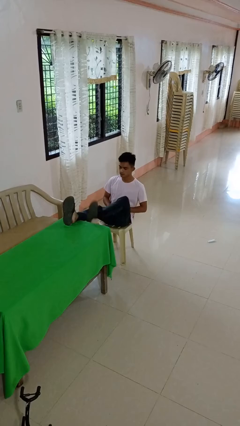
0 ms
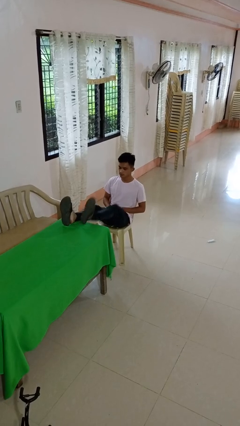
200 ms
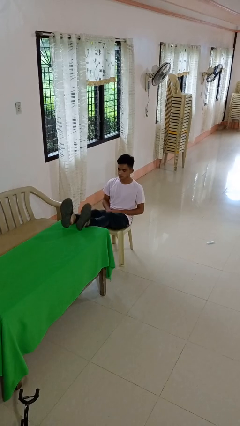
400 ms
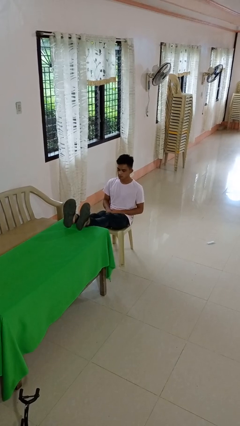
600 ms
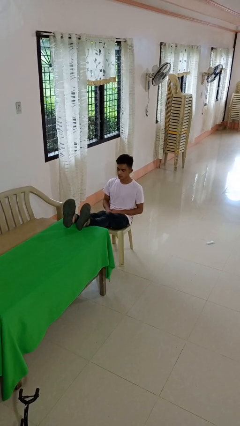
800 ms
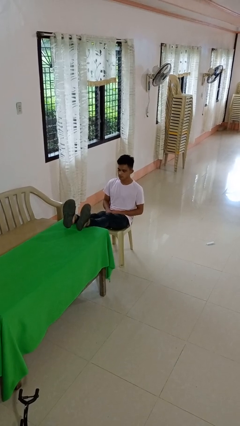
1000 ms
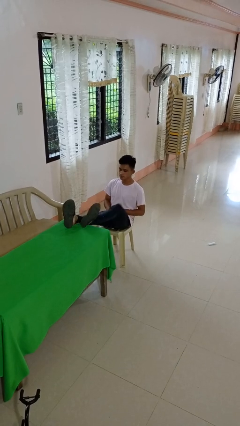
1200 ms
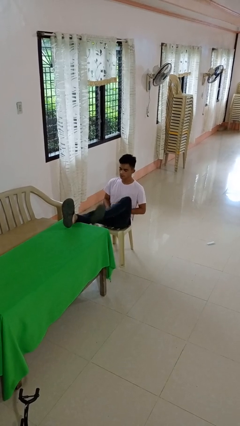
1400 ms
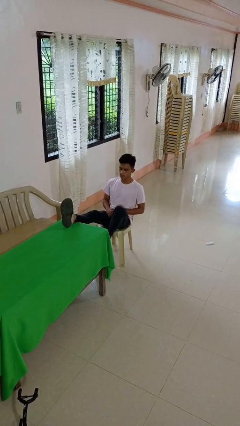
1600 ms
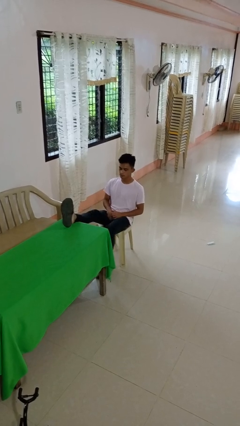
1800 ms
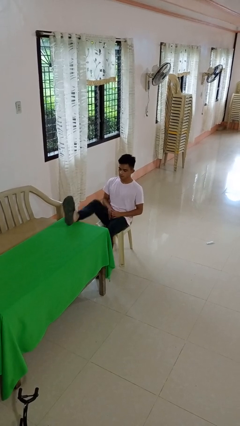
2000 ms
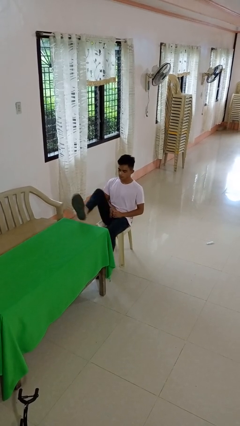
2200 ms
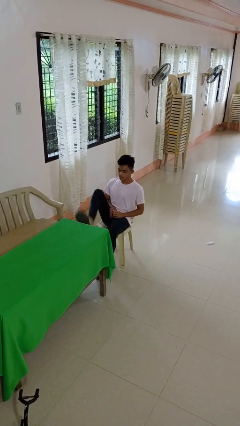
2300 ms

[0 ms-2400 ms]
person puts feet up

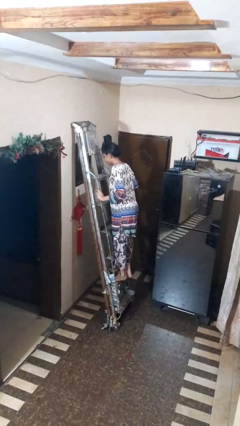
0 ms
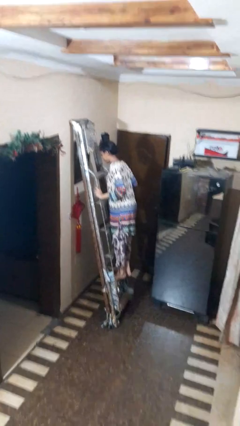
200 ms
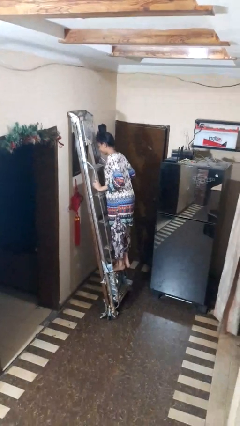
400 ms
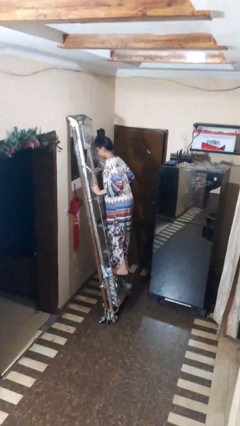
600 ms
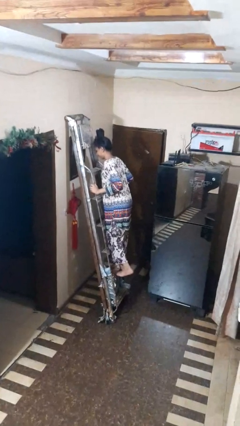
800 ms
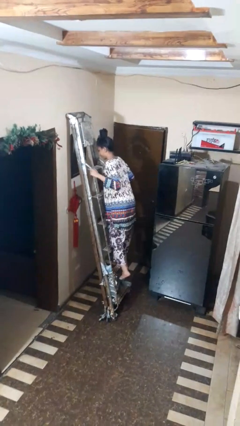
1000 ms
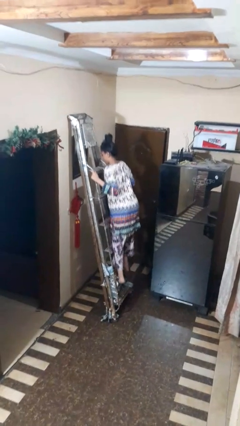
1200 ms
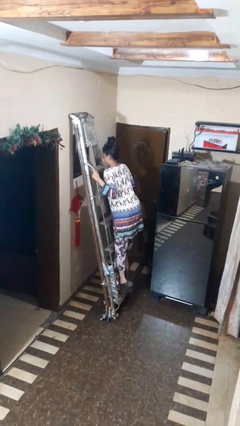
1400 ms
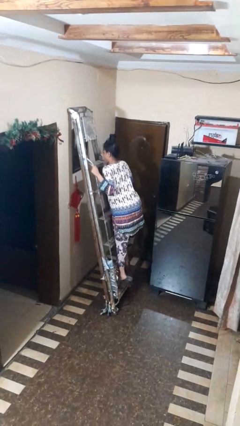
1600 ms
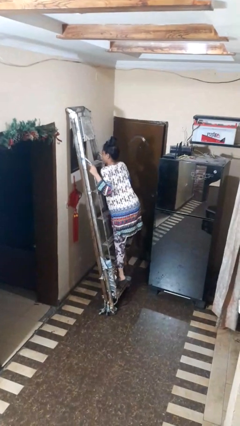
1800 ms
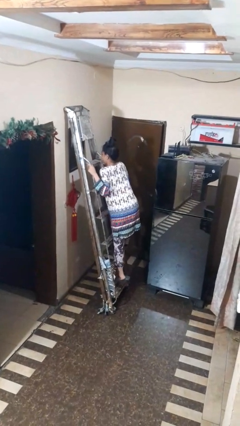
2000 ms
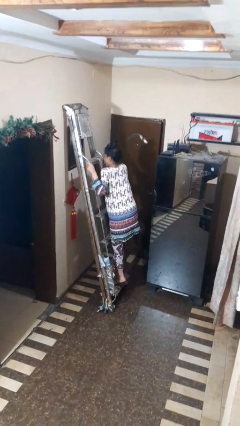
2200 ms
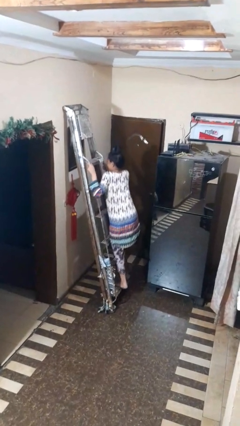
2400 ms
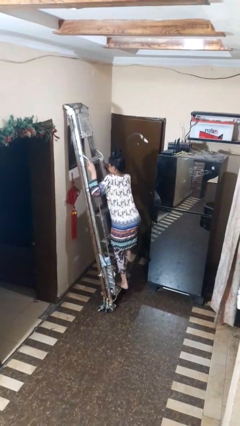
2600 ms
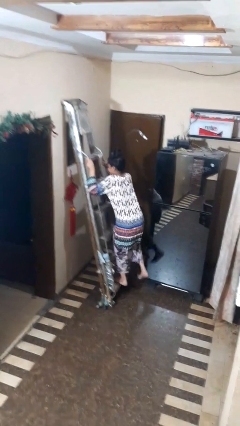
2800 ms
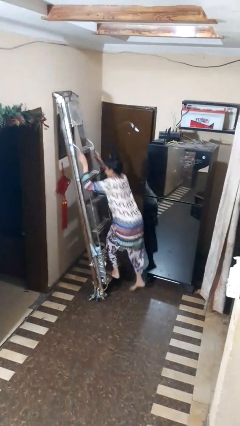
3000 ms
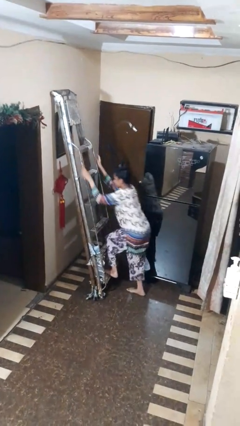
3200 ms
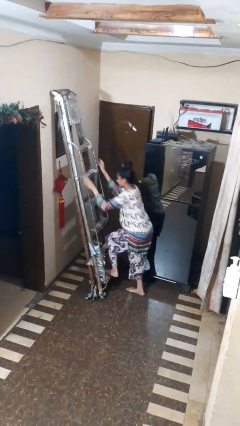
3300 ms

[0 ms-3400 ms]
person climbs down ladder

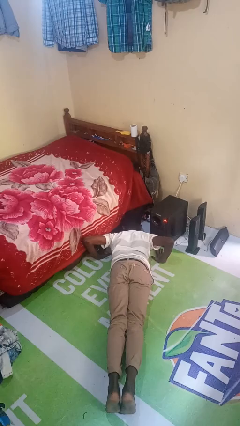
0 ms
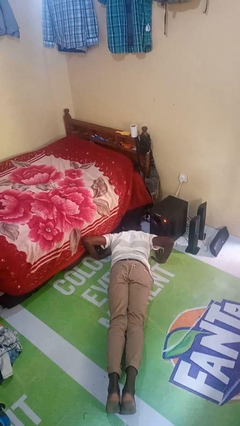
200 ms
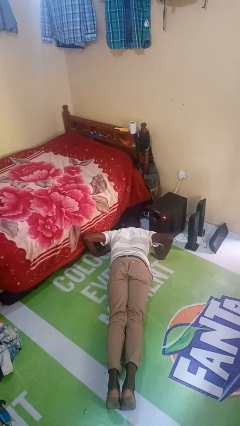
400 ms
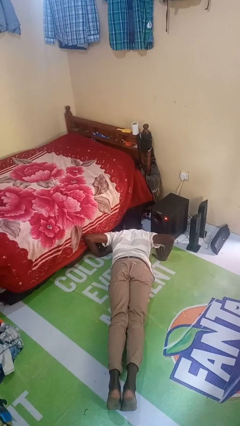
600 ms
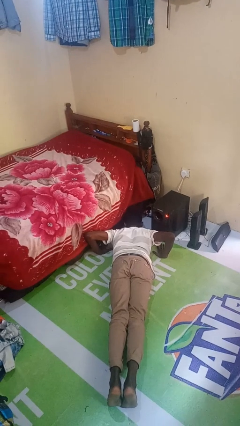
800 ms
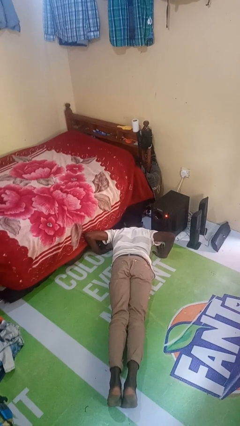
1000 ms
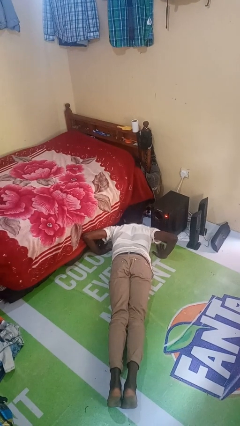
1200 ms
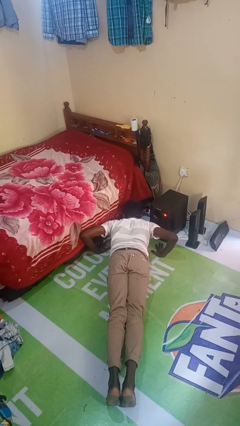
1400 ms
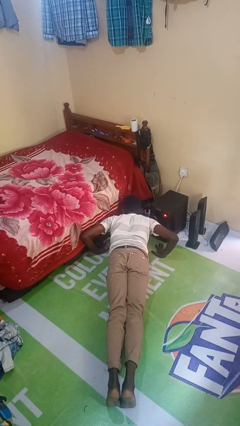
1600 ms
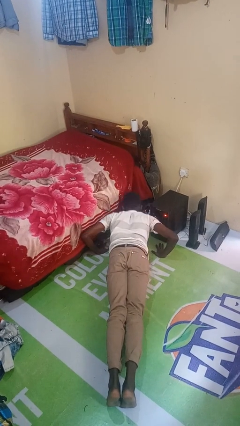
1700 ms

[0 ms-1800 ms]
person exercises with pushup

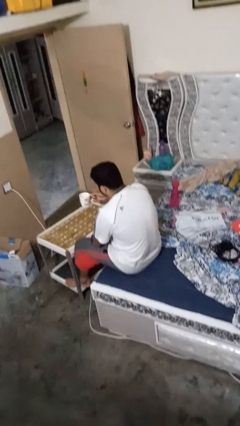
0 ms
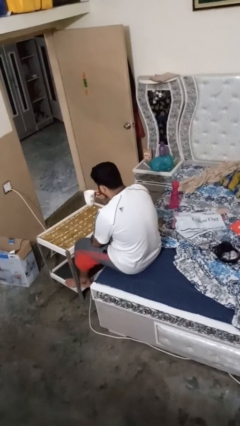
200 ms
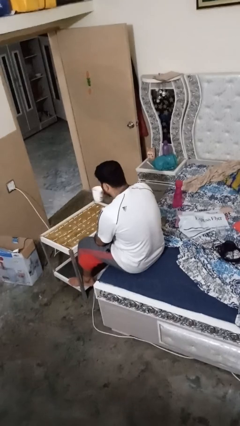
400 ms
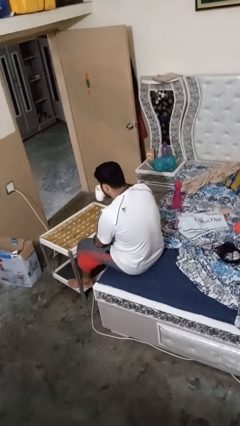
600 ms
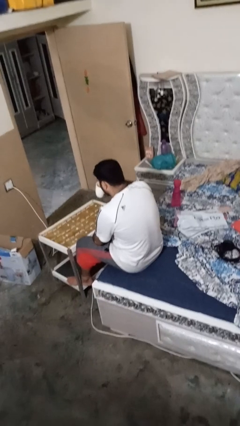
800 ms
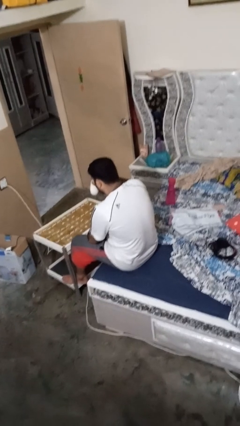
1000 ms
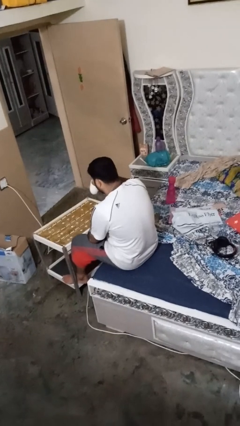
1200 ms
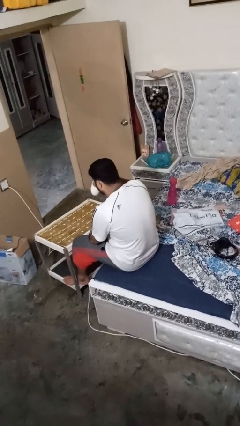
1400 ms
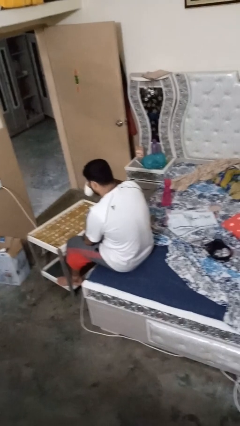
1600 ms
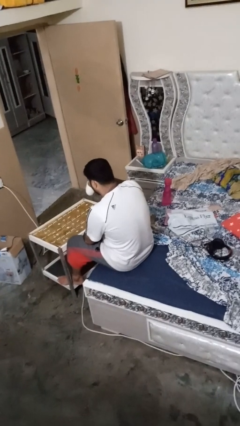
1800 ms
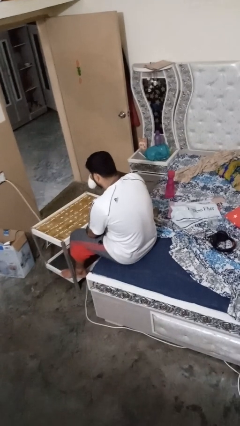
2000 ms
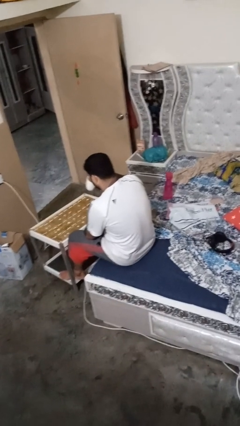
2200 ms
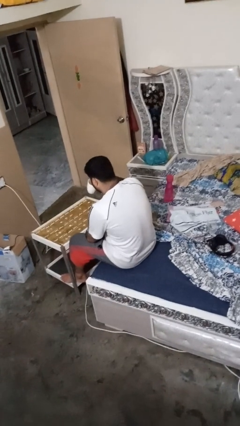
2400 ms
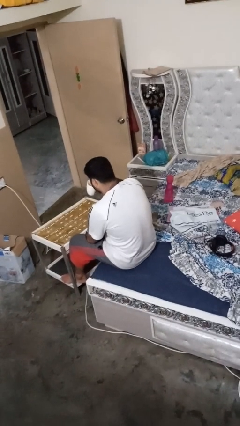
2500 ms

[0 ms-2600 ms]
person drinks from mug

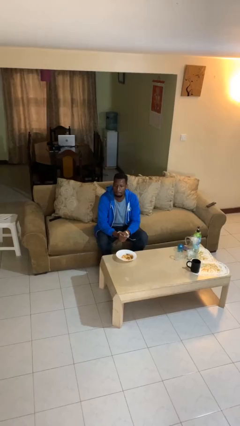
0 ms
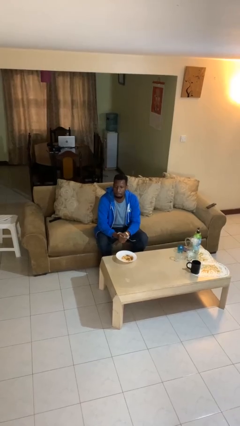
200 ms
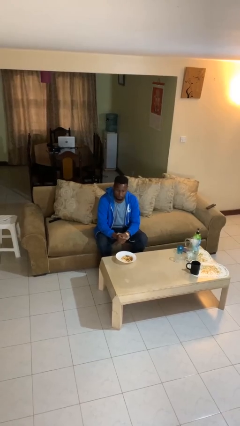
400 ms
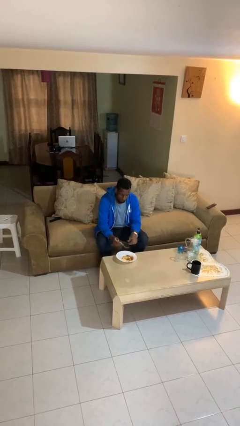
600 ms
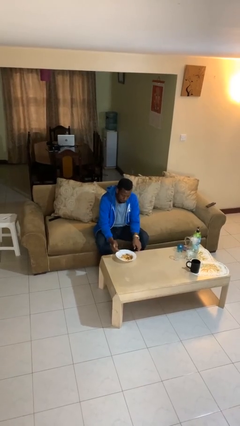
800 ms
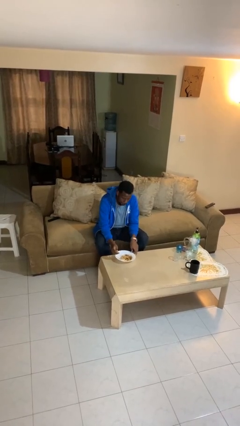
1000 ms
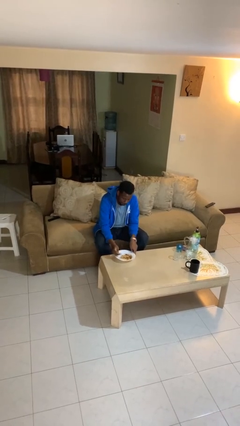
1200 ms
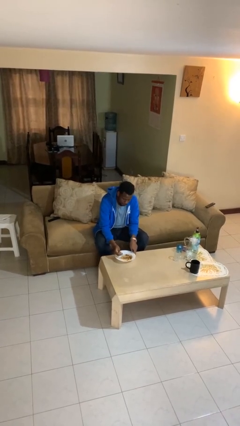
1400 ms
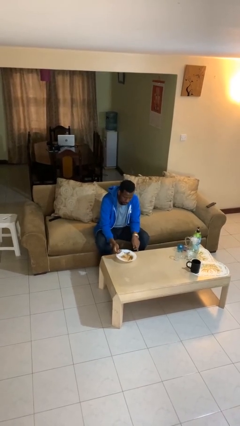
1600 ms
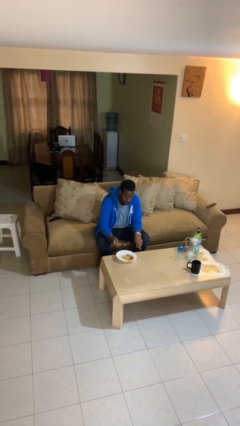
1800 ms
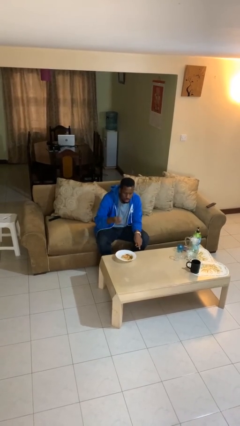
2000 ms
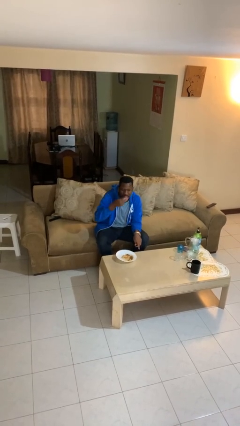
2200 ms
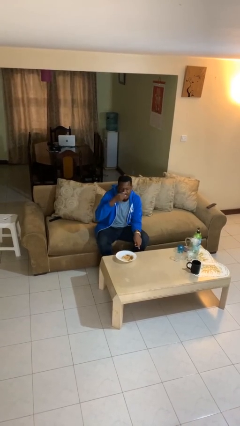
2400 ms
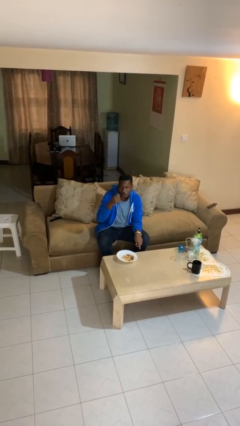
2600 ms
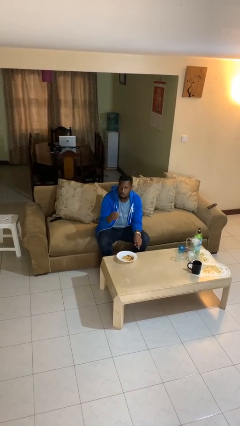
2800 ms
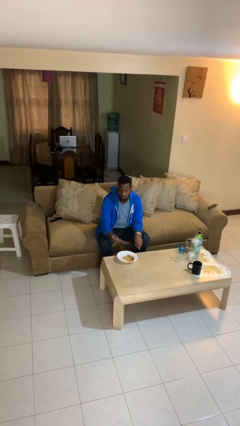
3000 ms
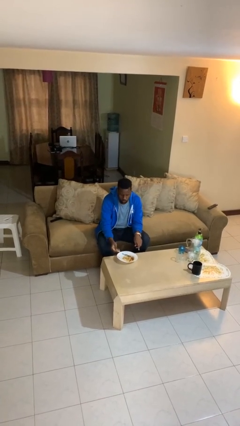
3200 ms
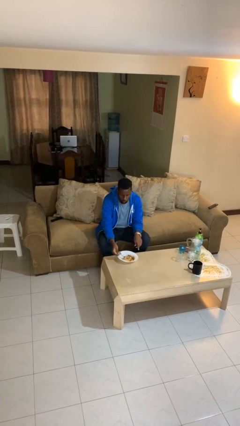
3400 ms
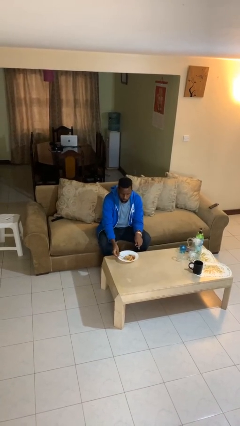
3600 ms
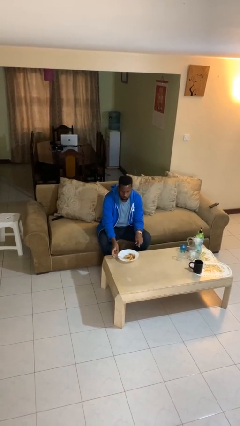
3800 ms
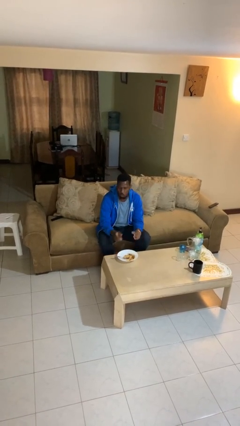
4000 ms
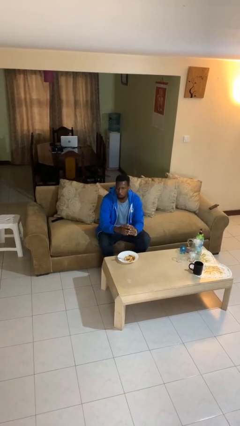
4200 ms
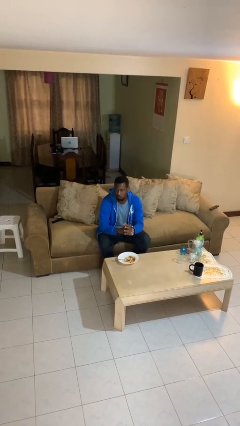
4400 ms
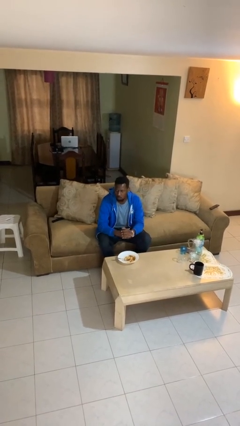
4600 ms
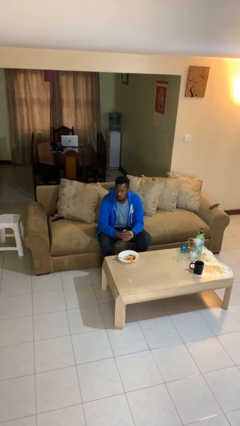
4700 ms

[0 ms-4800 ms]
person eats with utensil

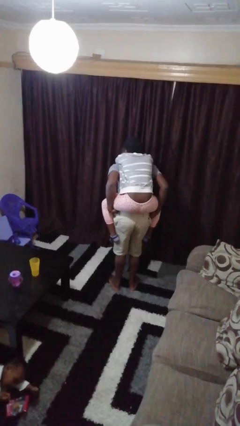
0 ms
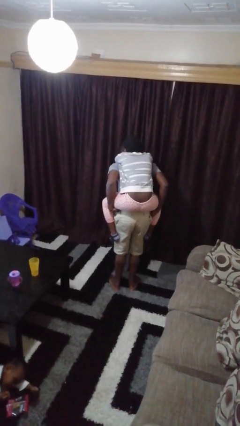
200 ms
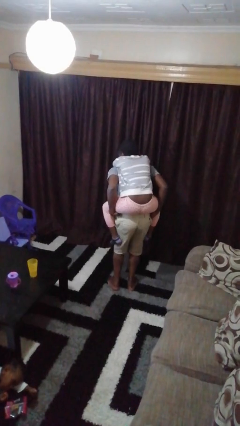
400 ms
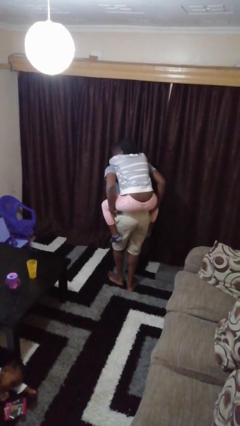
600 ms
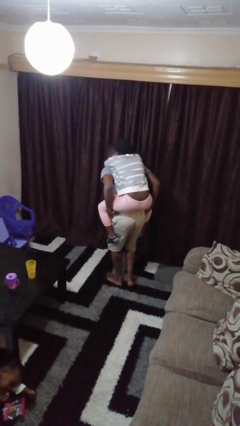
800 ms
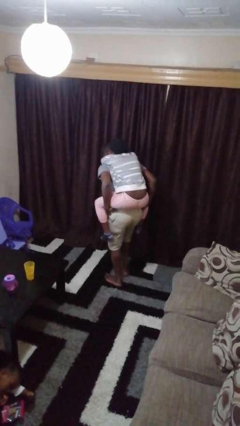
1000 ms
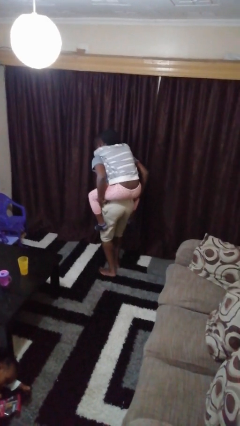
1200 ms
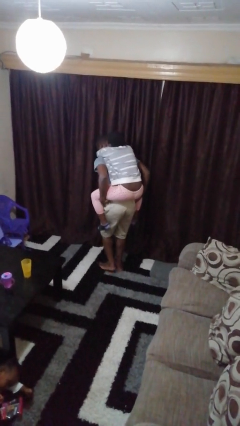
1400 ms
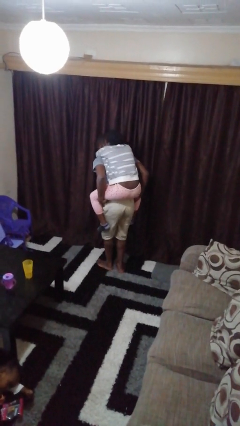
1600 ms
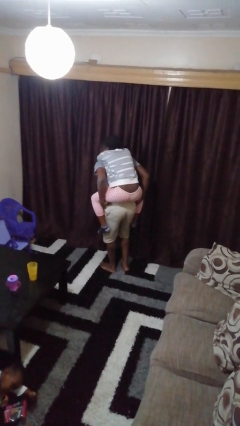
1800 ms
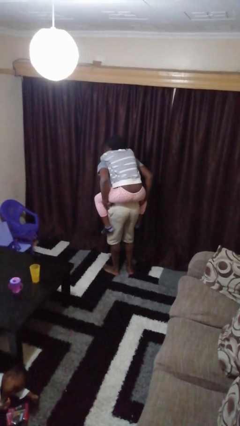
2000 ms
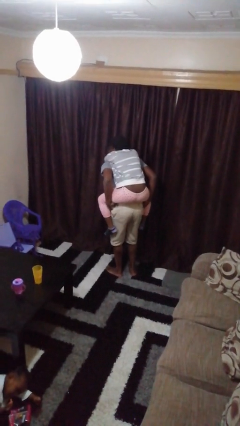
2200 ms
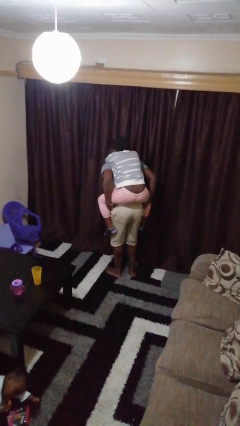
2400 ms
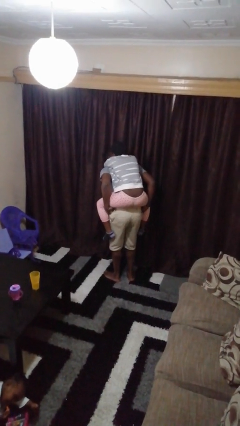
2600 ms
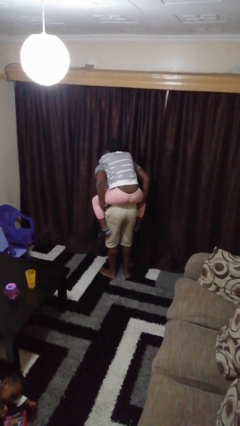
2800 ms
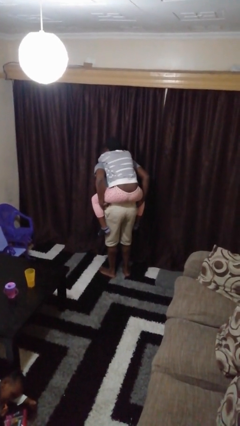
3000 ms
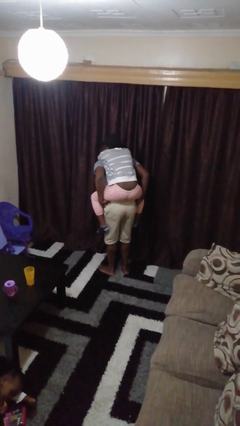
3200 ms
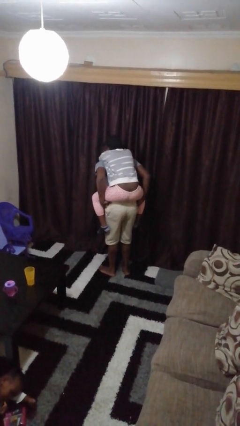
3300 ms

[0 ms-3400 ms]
person carries person on back
